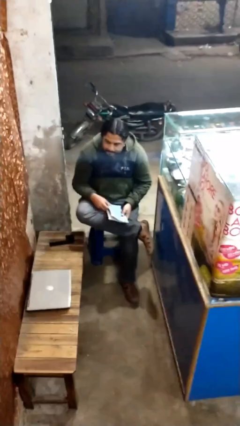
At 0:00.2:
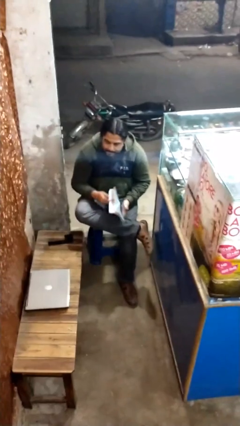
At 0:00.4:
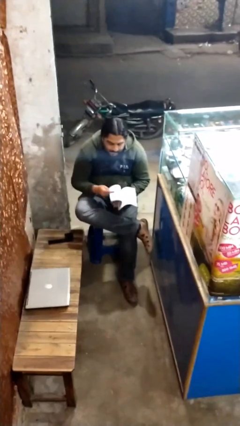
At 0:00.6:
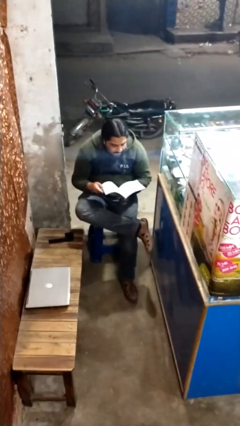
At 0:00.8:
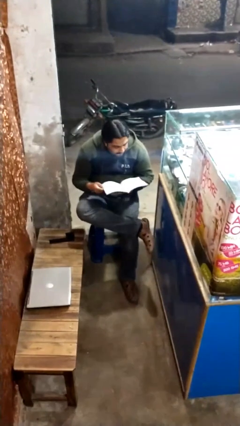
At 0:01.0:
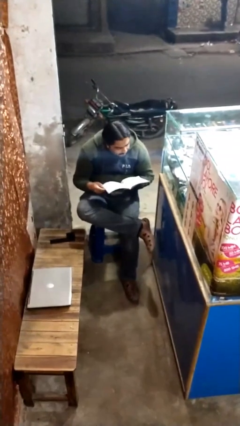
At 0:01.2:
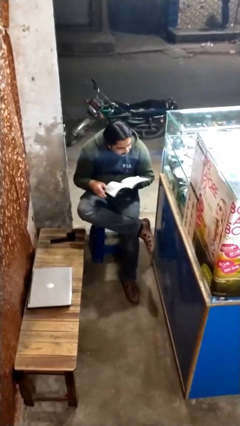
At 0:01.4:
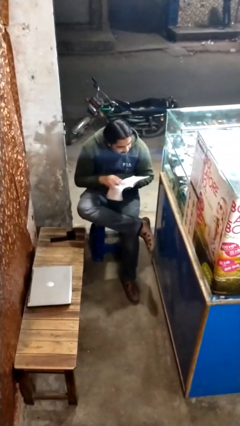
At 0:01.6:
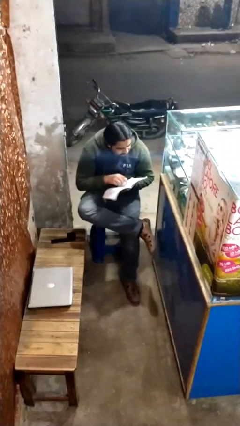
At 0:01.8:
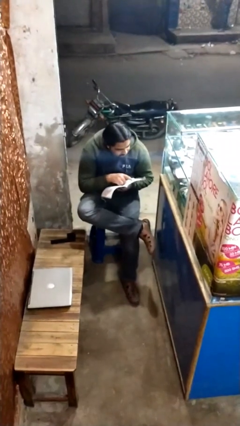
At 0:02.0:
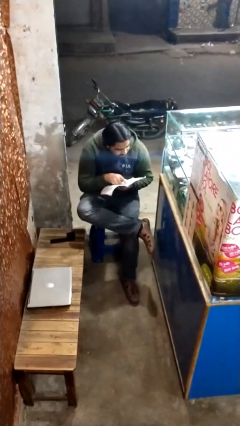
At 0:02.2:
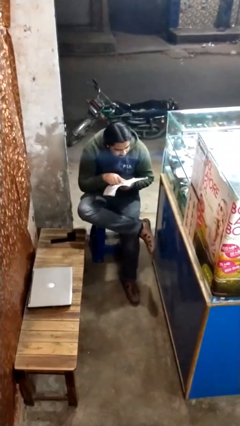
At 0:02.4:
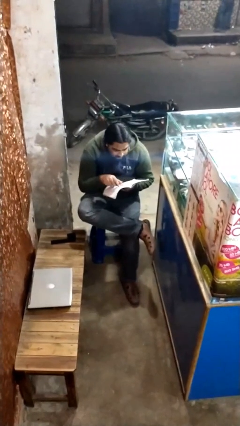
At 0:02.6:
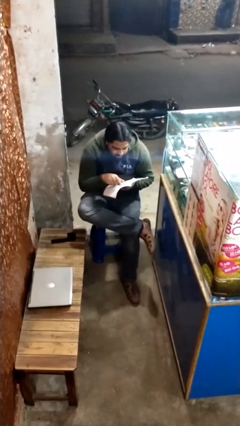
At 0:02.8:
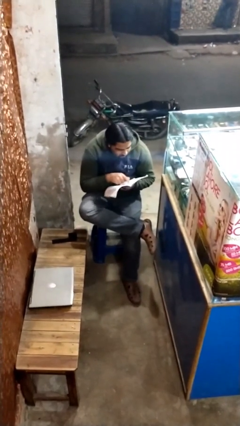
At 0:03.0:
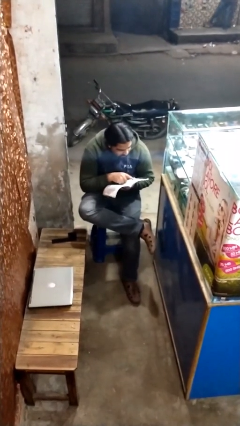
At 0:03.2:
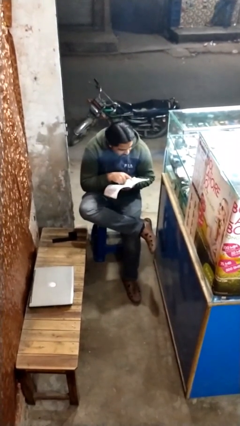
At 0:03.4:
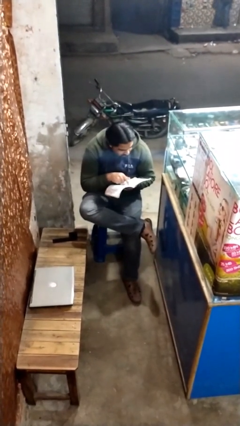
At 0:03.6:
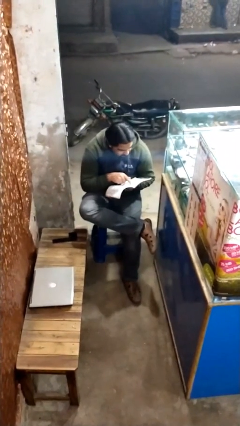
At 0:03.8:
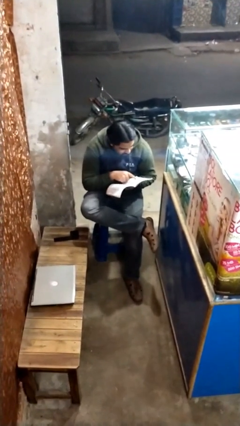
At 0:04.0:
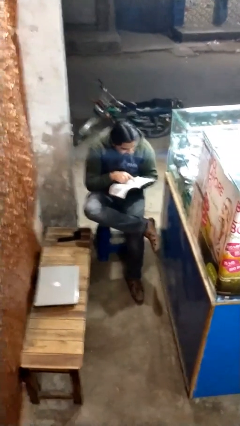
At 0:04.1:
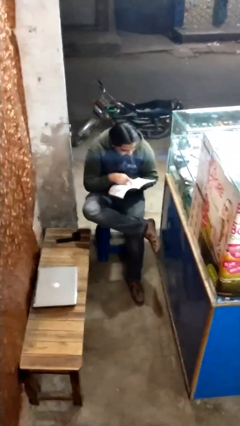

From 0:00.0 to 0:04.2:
person reads document

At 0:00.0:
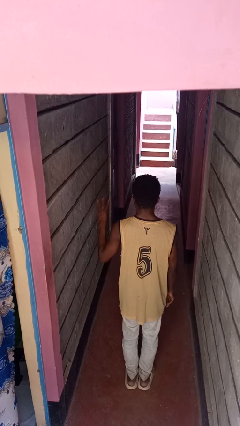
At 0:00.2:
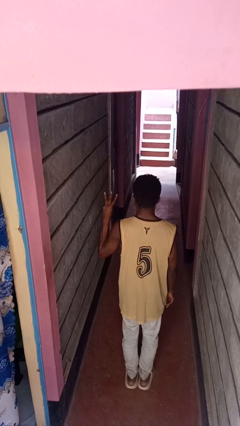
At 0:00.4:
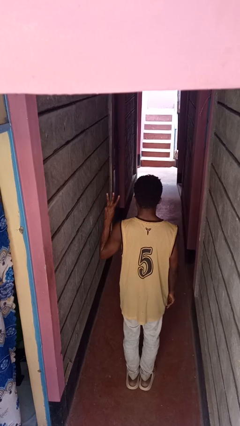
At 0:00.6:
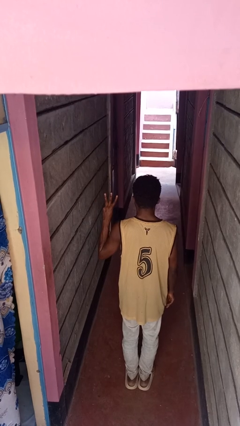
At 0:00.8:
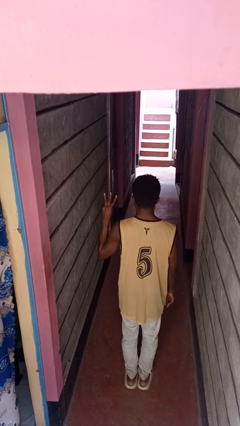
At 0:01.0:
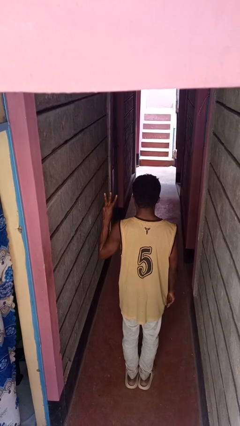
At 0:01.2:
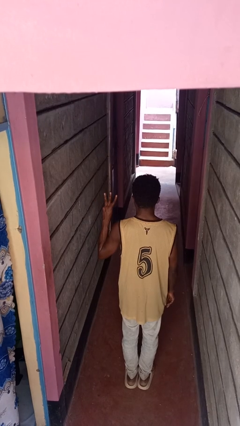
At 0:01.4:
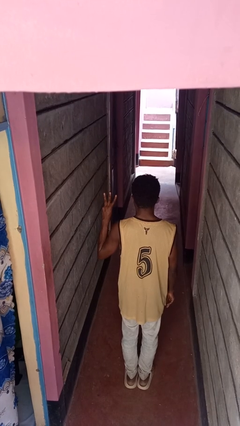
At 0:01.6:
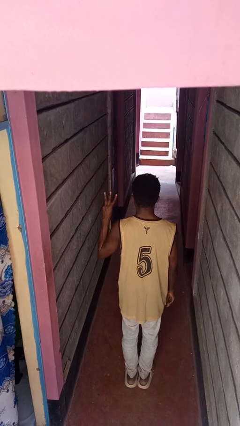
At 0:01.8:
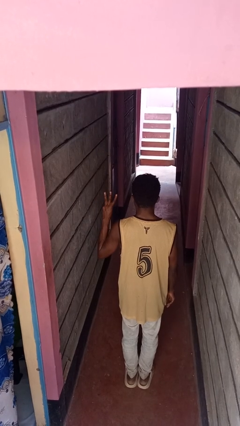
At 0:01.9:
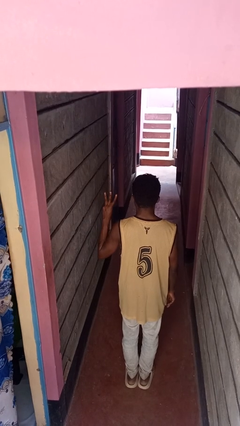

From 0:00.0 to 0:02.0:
person gestures number three

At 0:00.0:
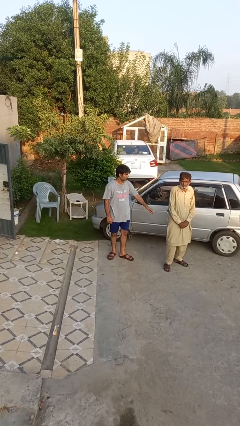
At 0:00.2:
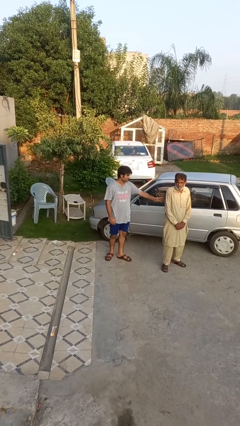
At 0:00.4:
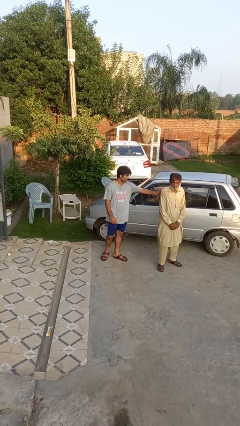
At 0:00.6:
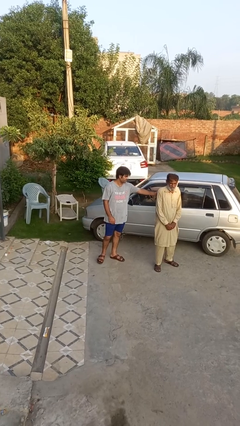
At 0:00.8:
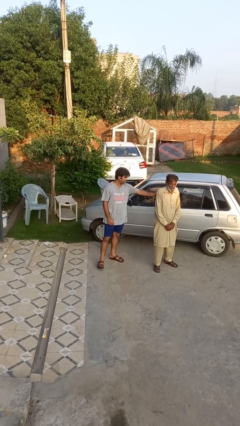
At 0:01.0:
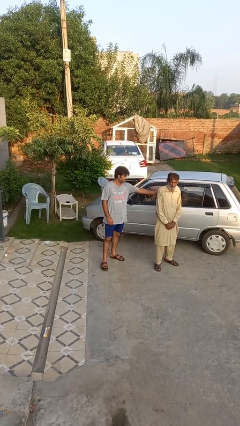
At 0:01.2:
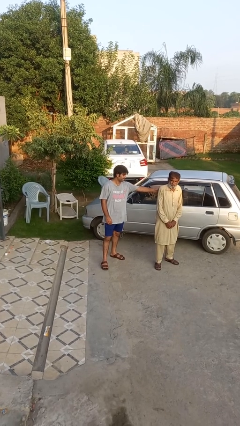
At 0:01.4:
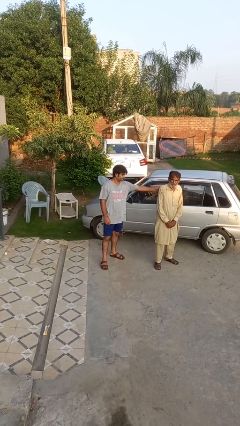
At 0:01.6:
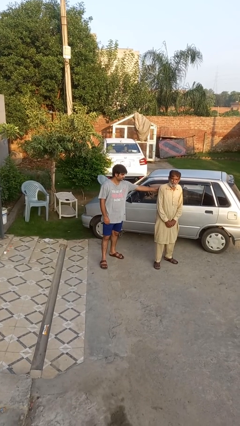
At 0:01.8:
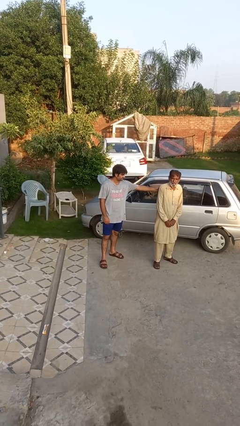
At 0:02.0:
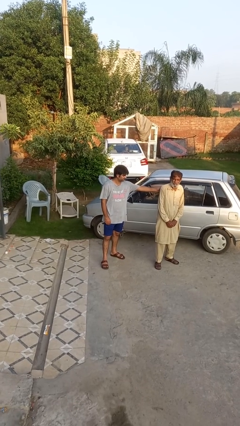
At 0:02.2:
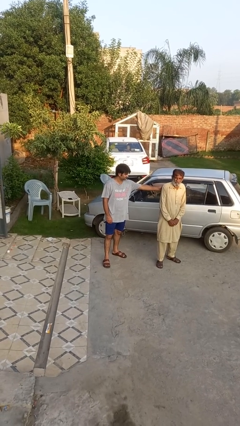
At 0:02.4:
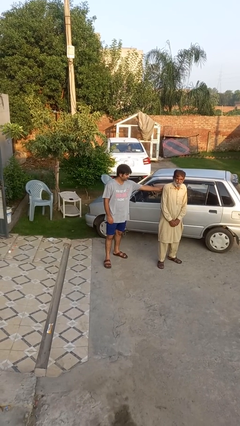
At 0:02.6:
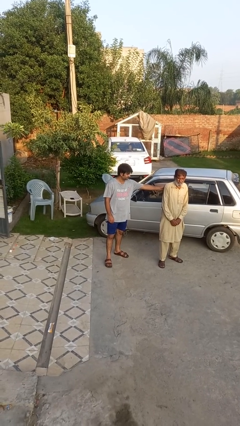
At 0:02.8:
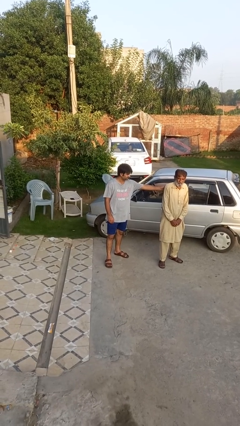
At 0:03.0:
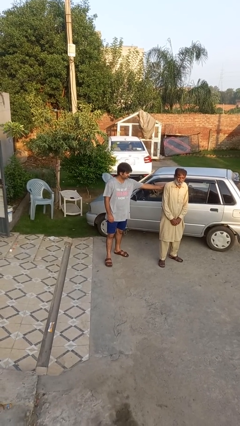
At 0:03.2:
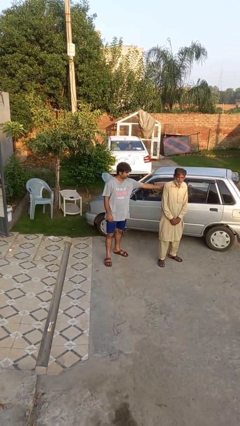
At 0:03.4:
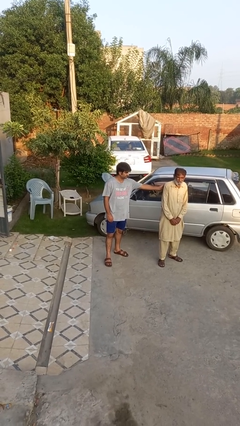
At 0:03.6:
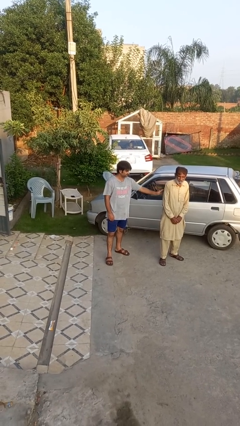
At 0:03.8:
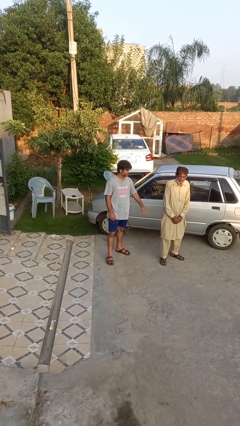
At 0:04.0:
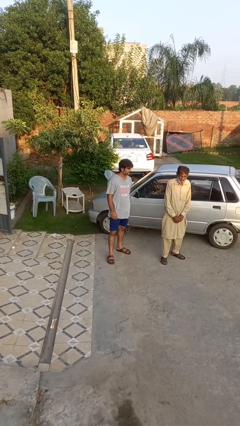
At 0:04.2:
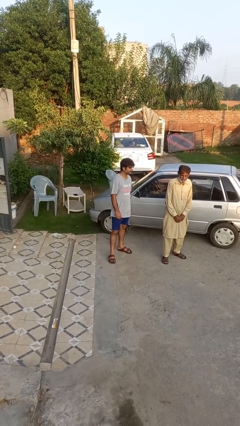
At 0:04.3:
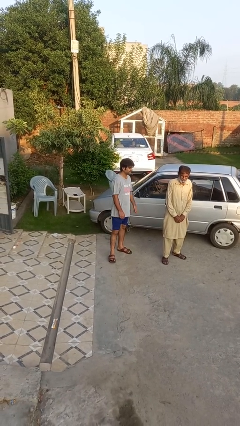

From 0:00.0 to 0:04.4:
person touches back of person

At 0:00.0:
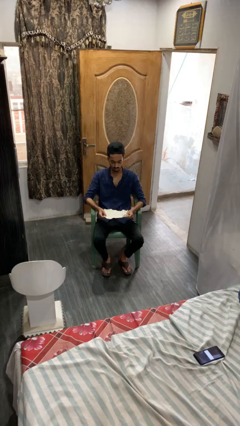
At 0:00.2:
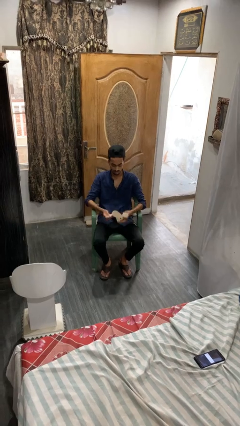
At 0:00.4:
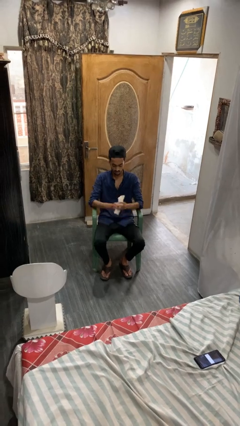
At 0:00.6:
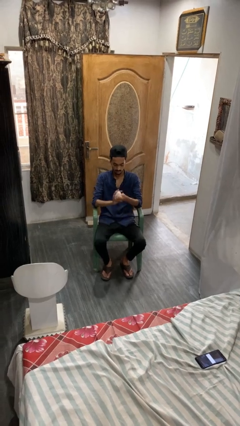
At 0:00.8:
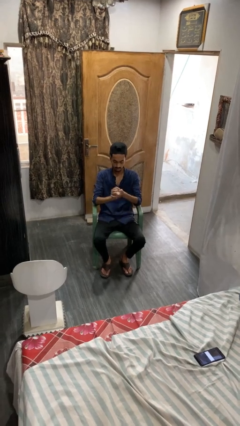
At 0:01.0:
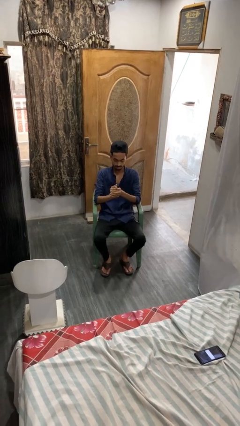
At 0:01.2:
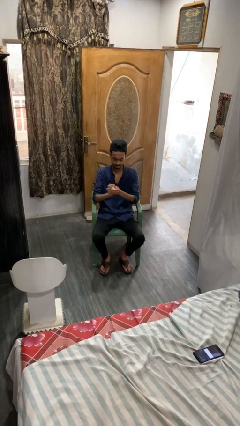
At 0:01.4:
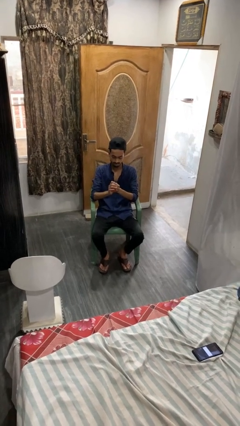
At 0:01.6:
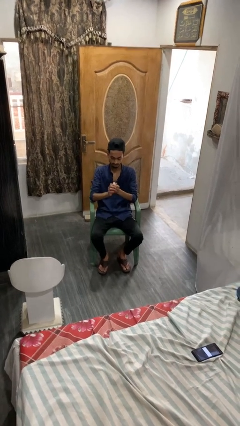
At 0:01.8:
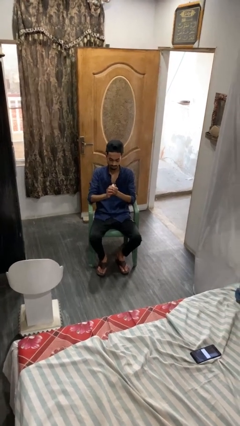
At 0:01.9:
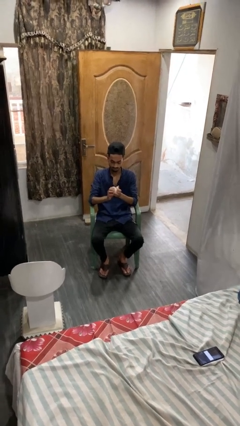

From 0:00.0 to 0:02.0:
person crumples paper

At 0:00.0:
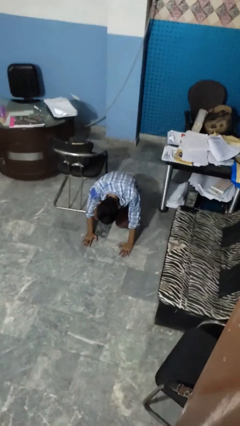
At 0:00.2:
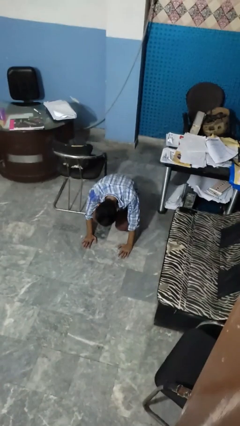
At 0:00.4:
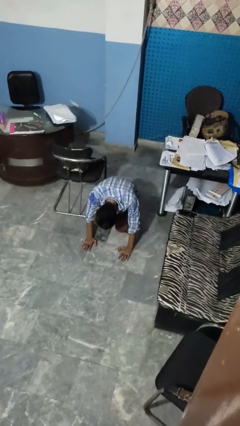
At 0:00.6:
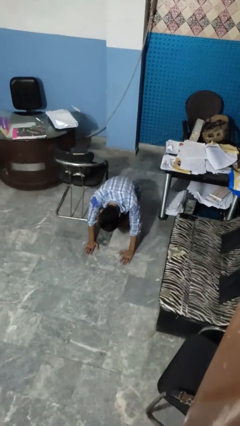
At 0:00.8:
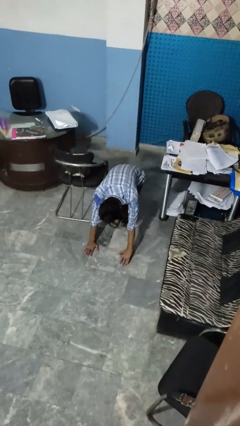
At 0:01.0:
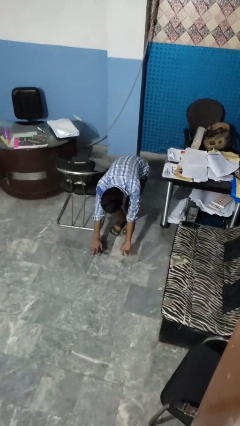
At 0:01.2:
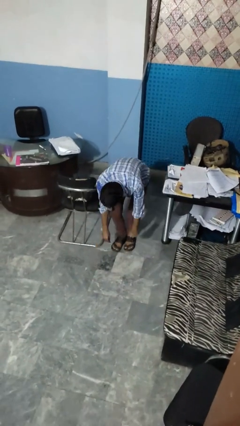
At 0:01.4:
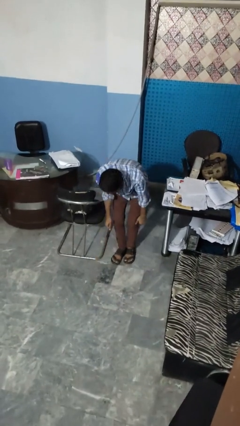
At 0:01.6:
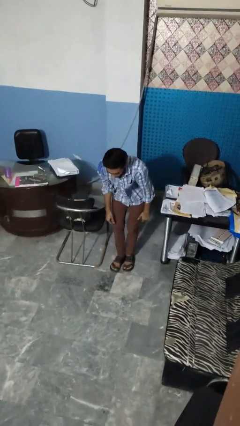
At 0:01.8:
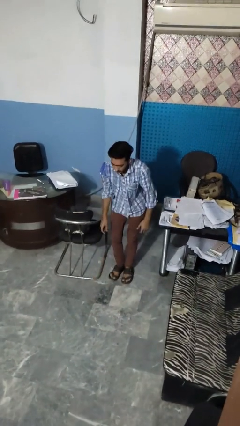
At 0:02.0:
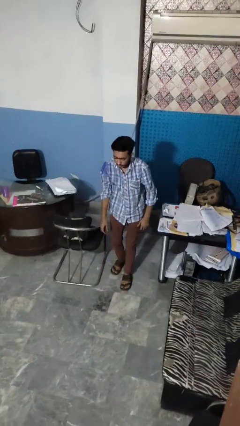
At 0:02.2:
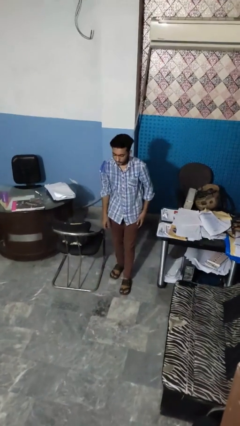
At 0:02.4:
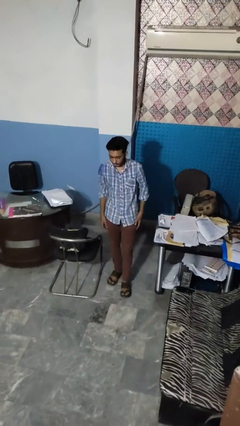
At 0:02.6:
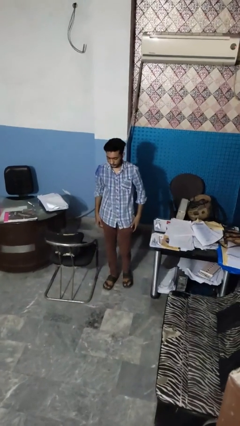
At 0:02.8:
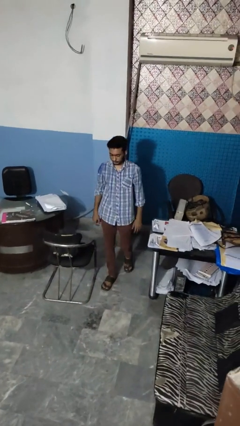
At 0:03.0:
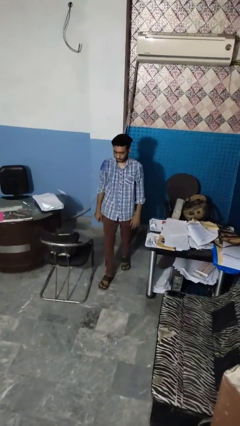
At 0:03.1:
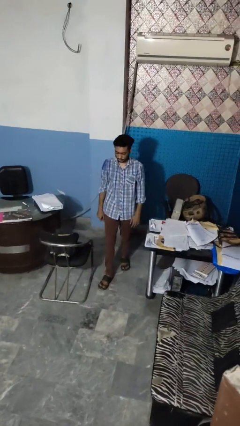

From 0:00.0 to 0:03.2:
person stands up from floor

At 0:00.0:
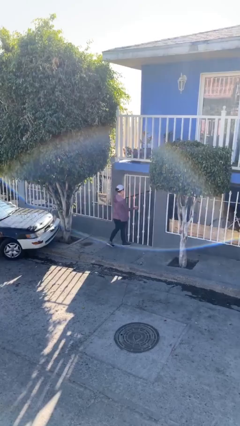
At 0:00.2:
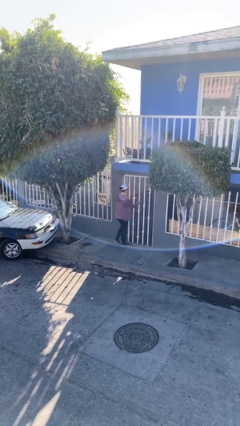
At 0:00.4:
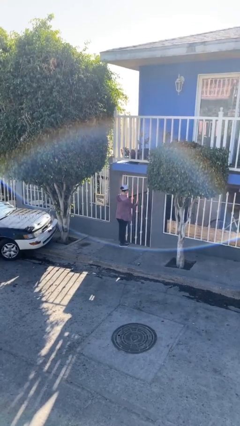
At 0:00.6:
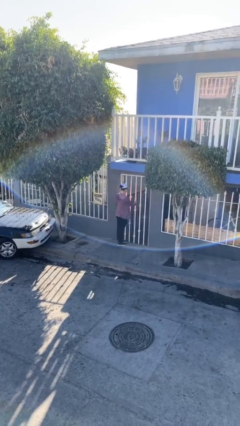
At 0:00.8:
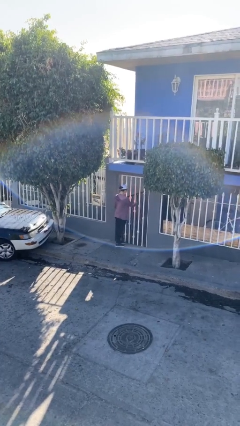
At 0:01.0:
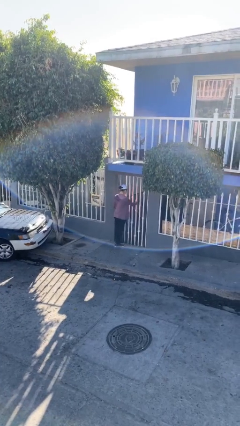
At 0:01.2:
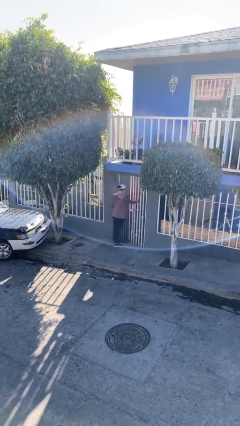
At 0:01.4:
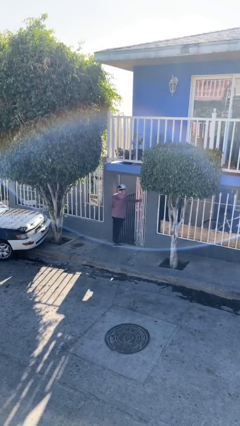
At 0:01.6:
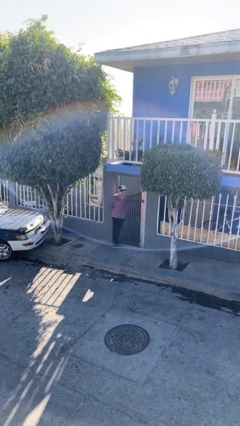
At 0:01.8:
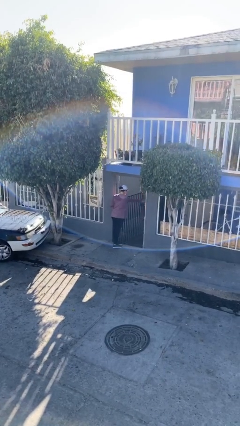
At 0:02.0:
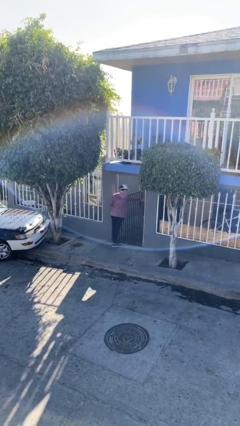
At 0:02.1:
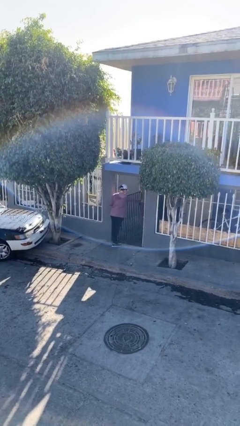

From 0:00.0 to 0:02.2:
person opens facility door
